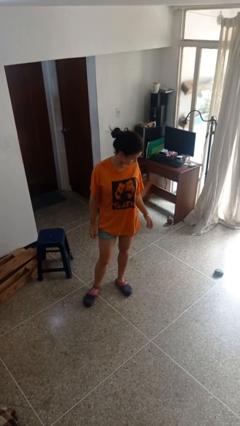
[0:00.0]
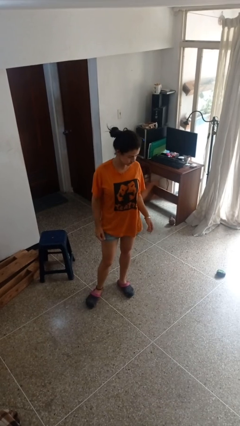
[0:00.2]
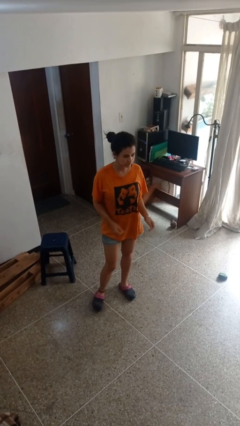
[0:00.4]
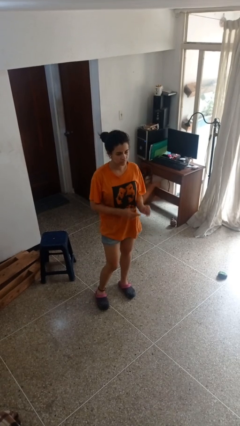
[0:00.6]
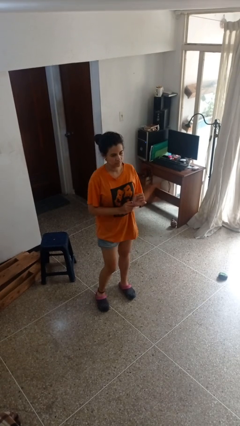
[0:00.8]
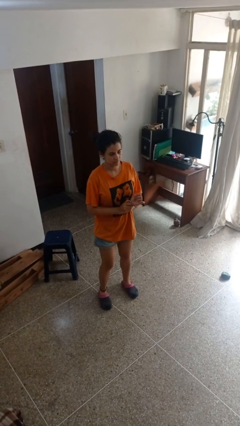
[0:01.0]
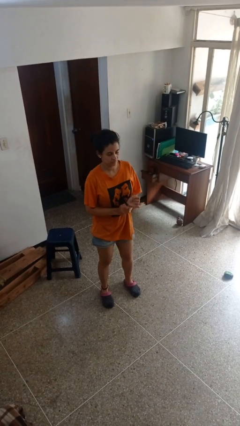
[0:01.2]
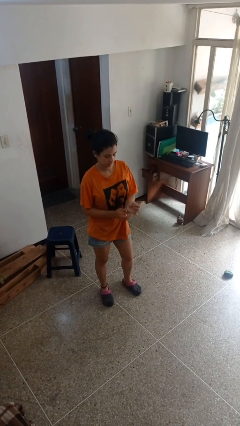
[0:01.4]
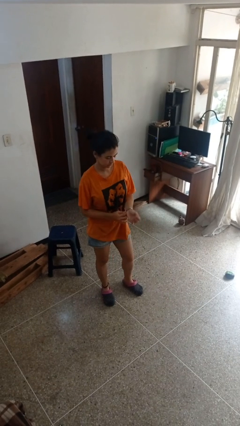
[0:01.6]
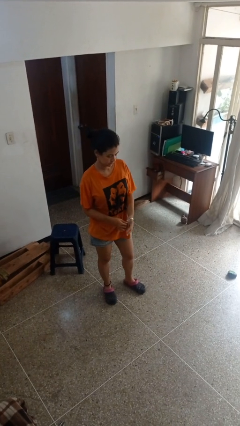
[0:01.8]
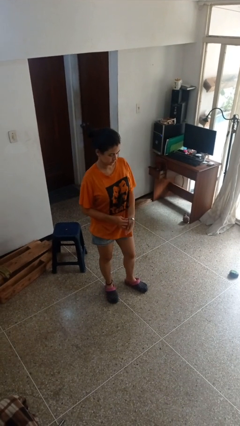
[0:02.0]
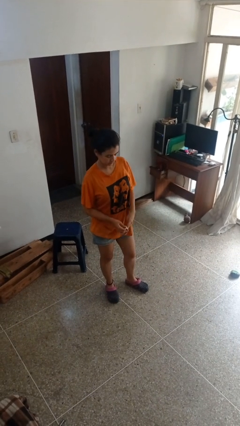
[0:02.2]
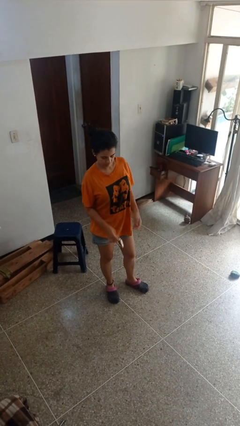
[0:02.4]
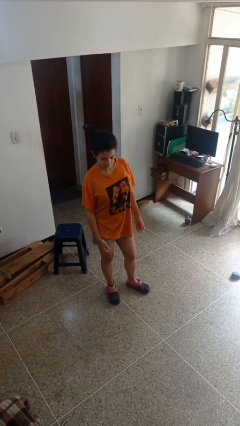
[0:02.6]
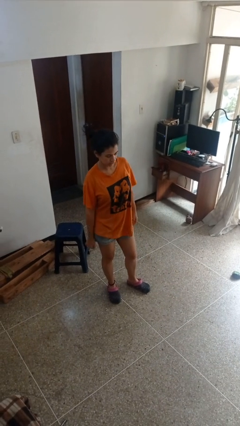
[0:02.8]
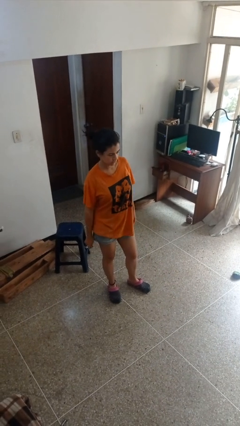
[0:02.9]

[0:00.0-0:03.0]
person takes off wristwatch

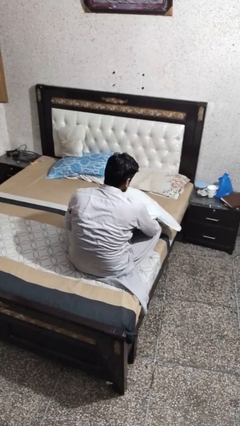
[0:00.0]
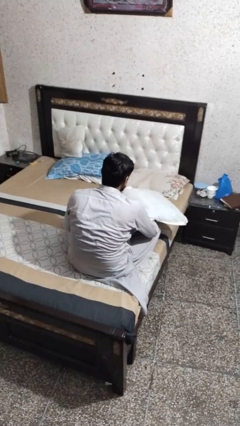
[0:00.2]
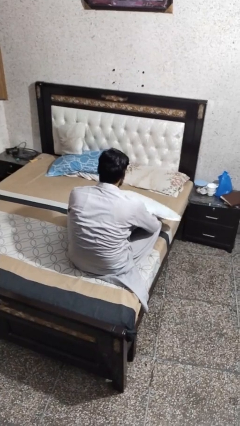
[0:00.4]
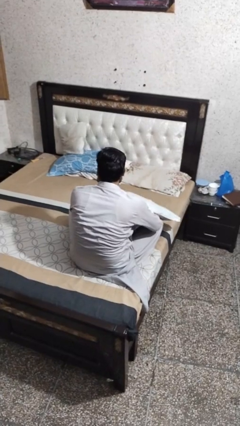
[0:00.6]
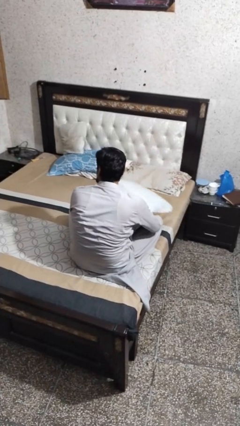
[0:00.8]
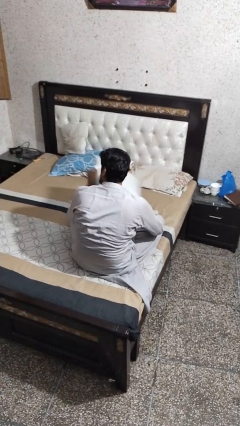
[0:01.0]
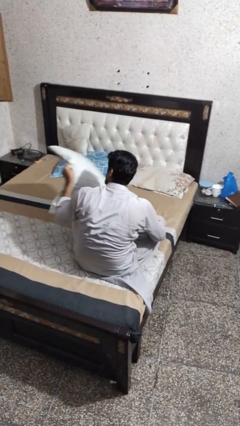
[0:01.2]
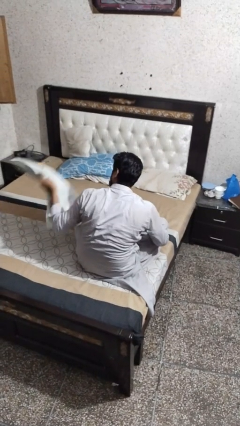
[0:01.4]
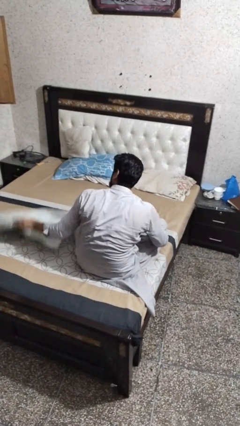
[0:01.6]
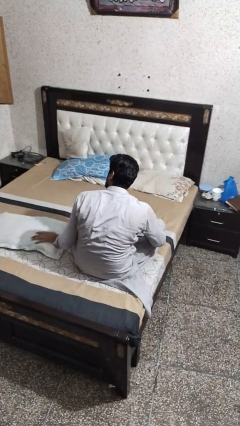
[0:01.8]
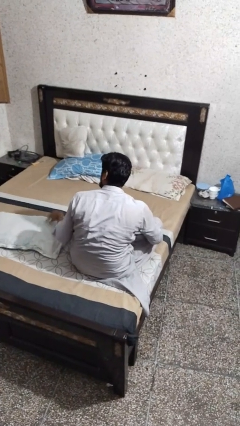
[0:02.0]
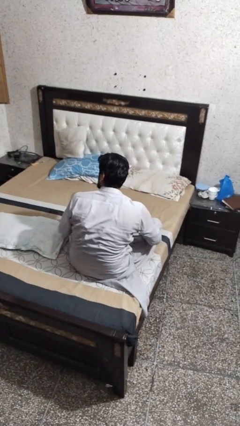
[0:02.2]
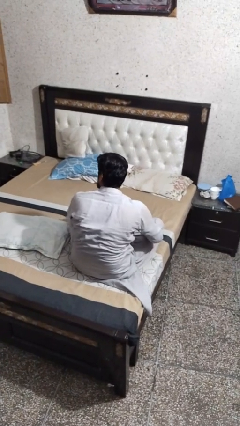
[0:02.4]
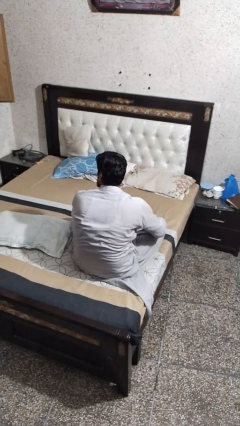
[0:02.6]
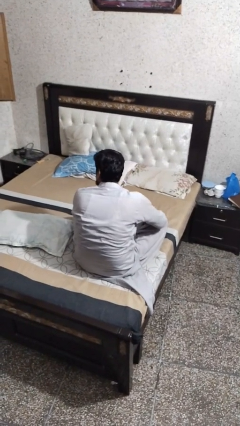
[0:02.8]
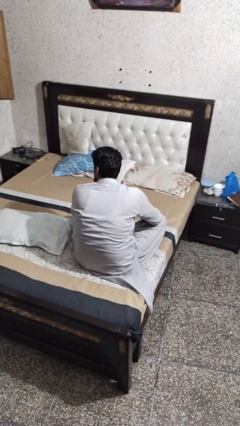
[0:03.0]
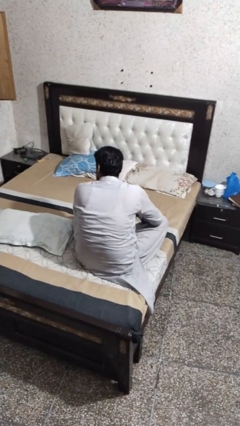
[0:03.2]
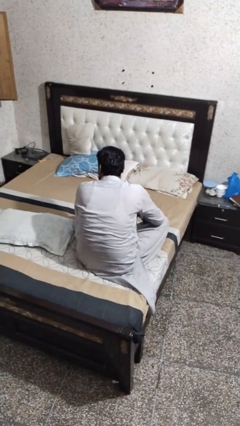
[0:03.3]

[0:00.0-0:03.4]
person puts down object on bed

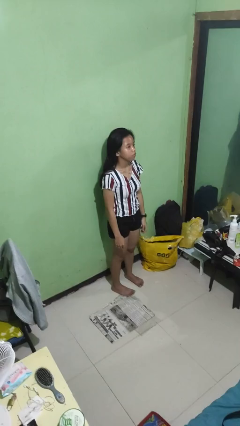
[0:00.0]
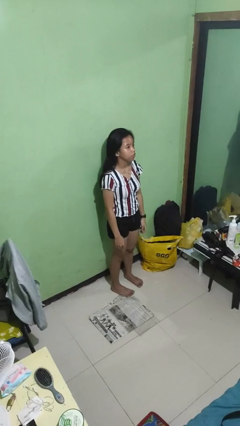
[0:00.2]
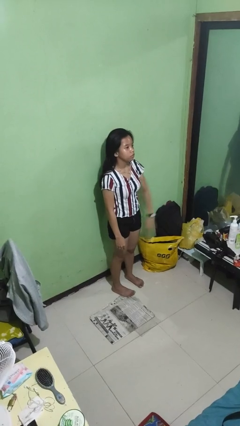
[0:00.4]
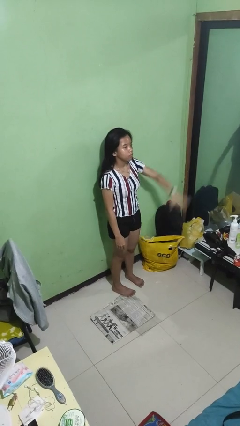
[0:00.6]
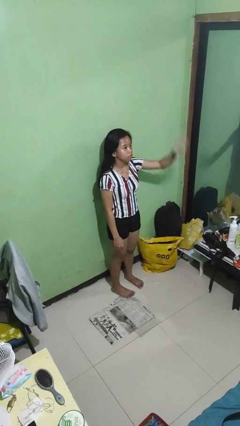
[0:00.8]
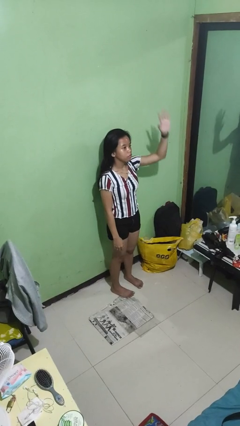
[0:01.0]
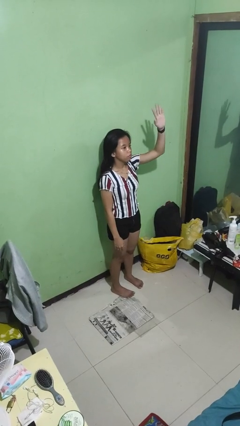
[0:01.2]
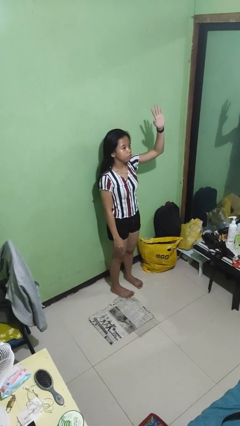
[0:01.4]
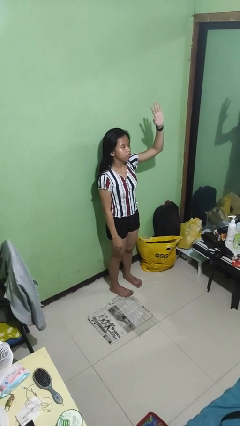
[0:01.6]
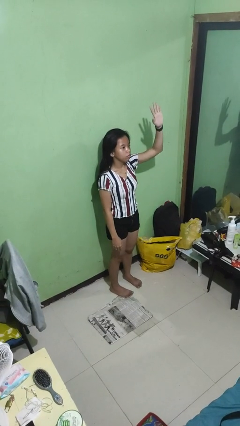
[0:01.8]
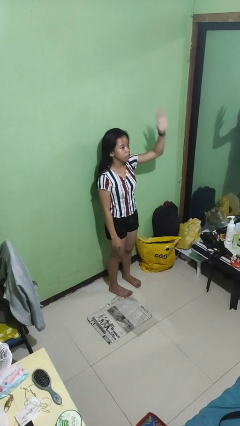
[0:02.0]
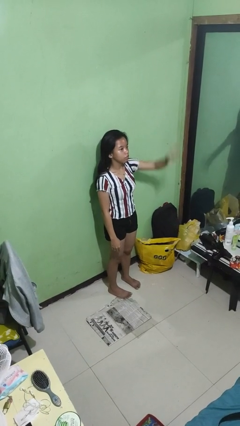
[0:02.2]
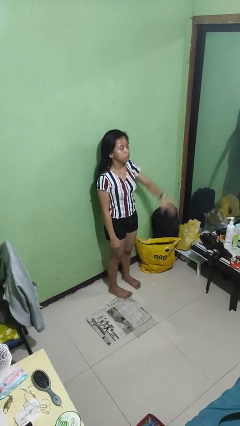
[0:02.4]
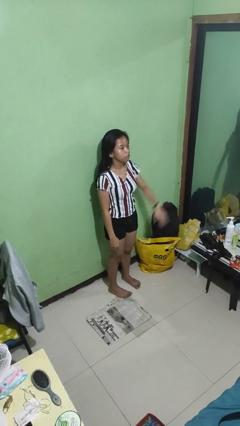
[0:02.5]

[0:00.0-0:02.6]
person gestures number five

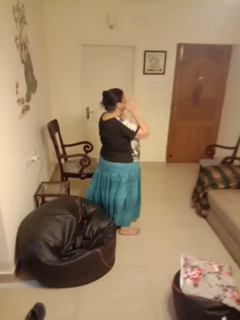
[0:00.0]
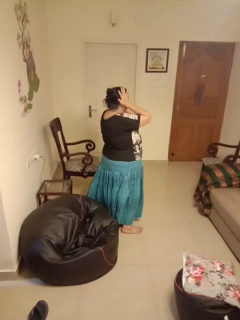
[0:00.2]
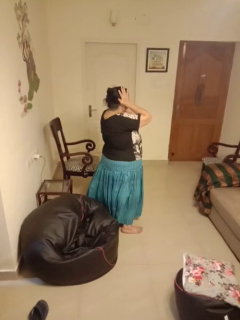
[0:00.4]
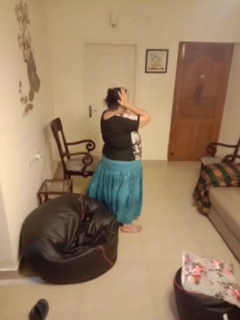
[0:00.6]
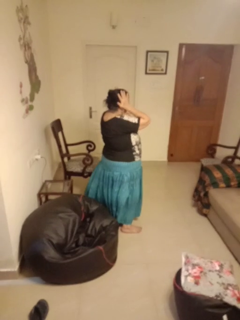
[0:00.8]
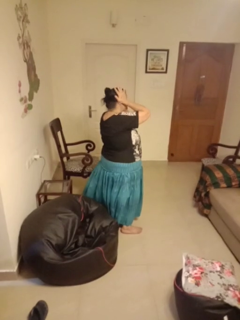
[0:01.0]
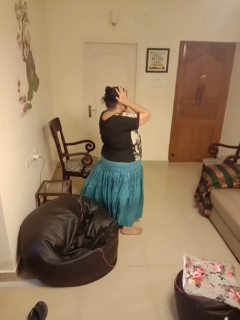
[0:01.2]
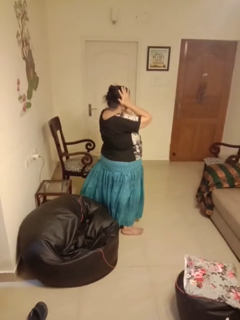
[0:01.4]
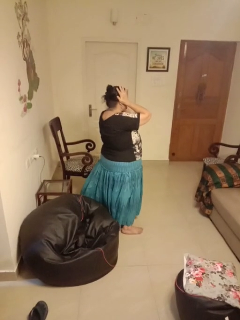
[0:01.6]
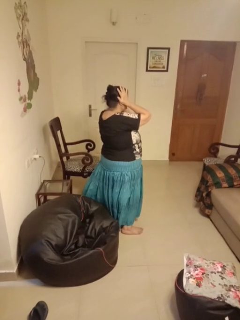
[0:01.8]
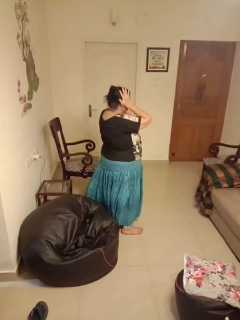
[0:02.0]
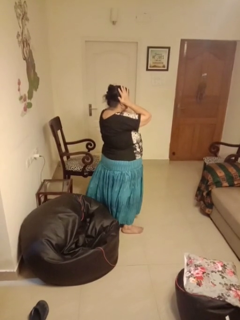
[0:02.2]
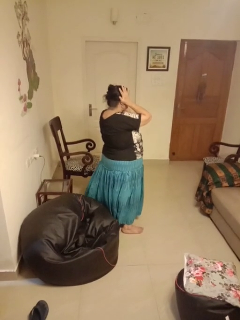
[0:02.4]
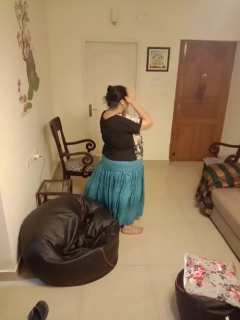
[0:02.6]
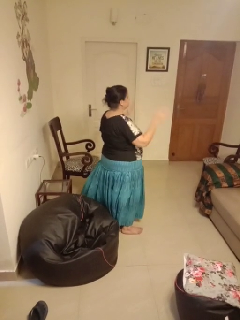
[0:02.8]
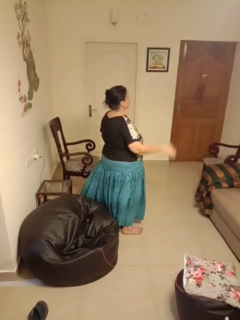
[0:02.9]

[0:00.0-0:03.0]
person puts fingers in ear

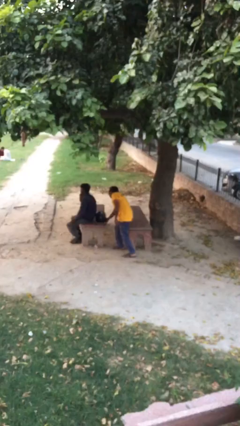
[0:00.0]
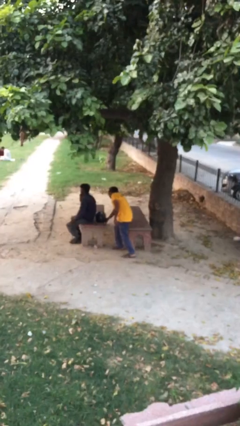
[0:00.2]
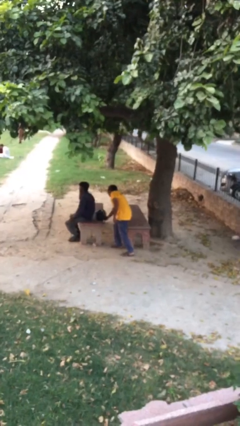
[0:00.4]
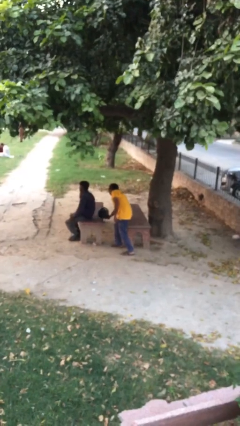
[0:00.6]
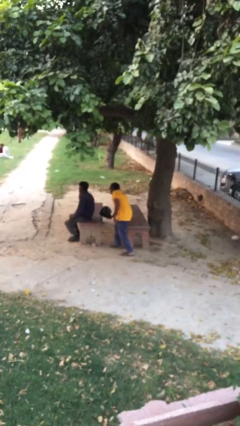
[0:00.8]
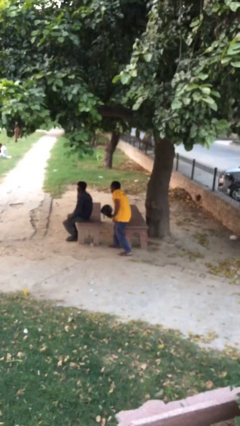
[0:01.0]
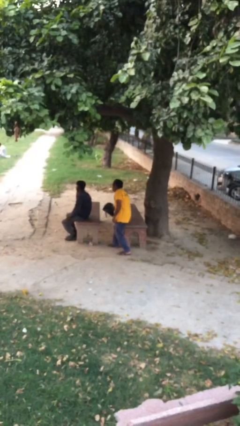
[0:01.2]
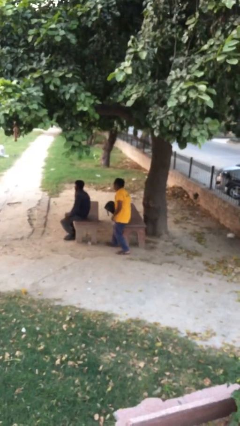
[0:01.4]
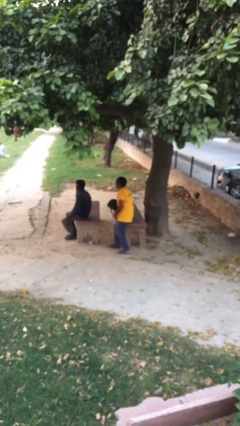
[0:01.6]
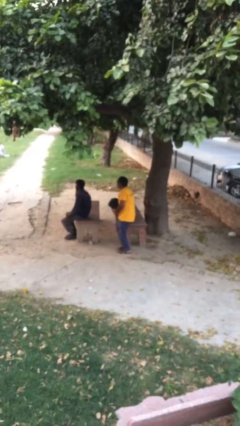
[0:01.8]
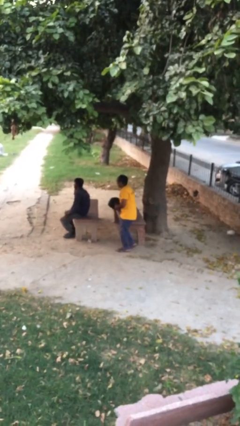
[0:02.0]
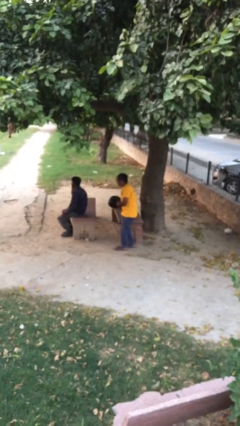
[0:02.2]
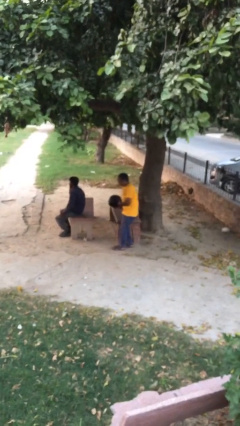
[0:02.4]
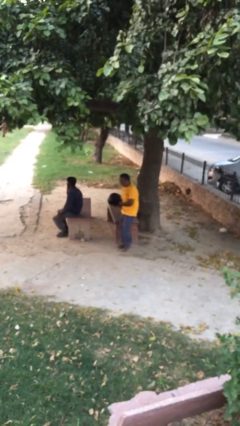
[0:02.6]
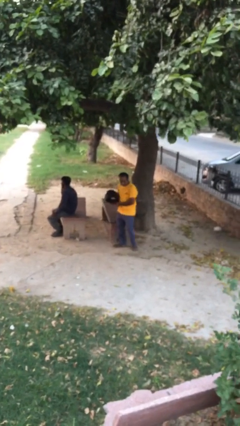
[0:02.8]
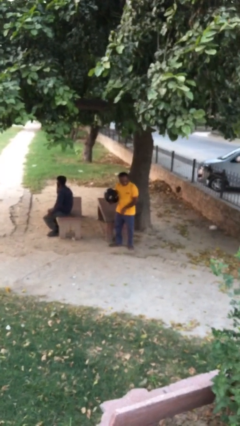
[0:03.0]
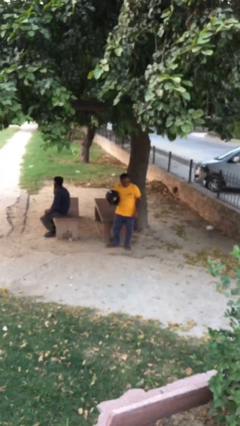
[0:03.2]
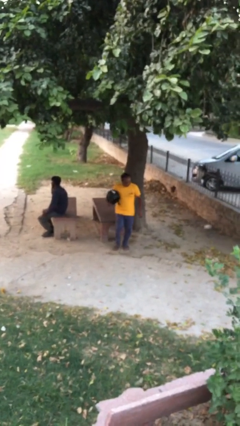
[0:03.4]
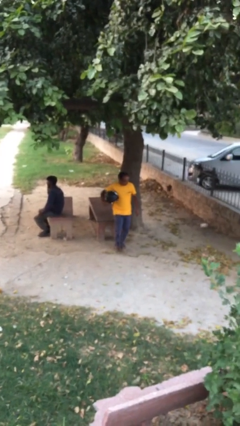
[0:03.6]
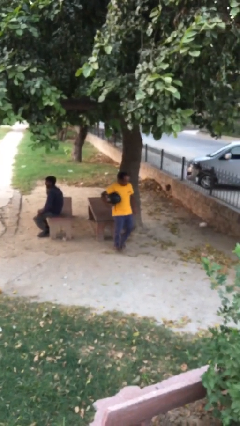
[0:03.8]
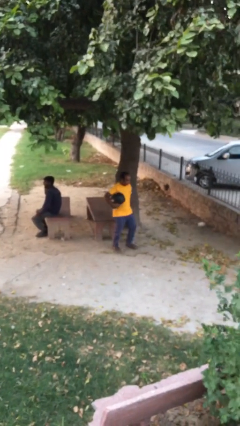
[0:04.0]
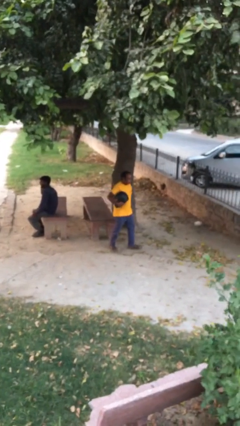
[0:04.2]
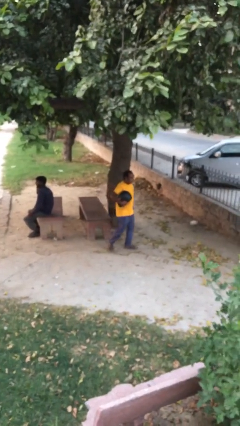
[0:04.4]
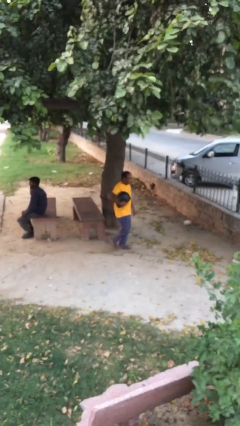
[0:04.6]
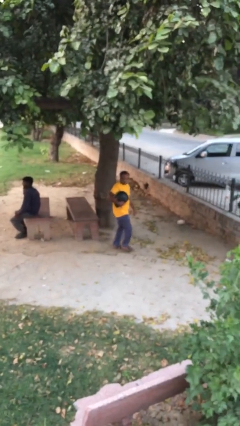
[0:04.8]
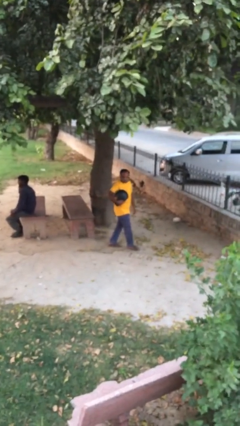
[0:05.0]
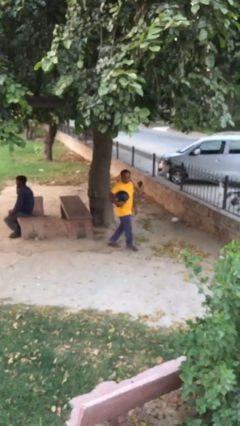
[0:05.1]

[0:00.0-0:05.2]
person steals object from person

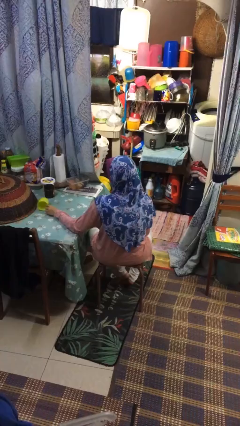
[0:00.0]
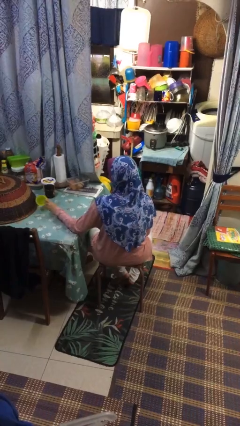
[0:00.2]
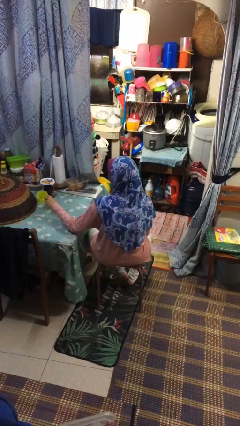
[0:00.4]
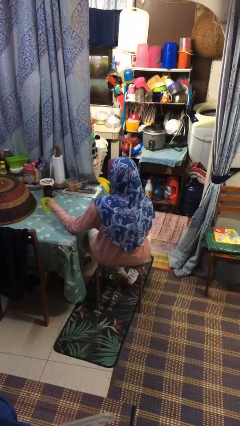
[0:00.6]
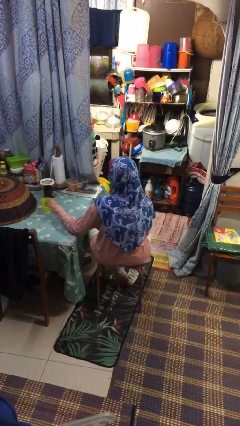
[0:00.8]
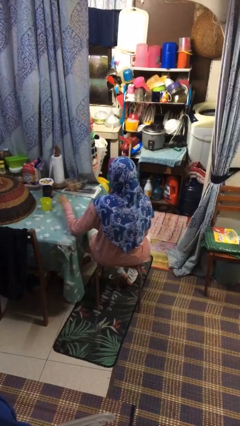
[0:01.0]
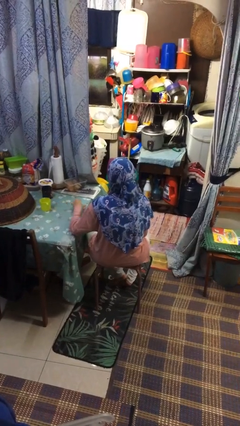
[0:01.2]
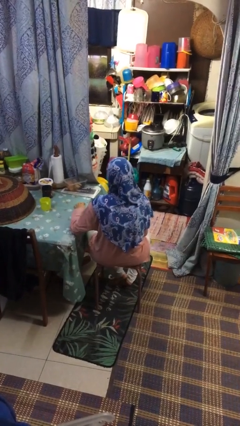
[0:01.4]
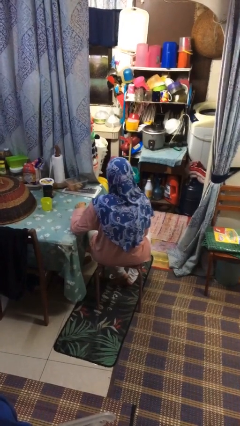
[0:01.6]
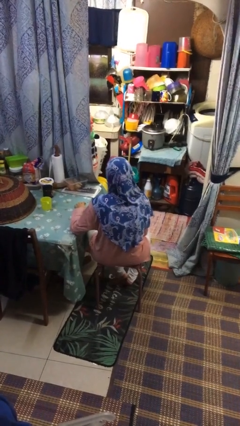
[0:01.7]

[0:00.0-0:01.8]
person sets upright glass
